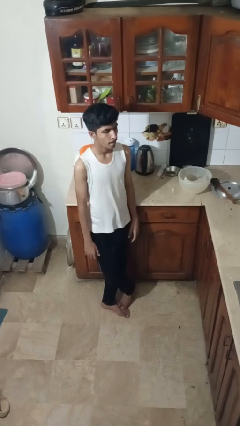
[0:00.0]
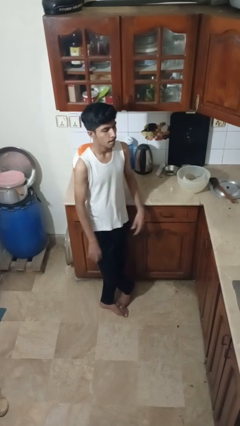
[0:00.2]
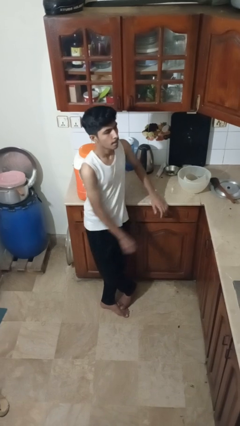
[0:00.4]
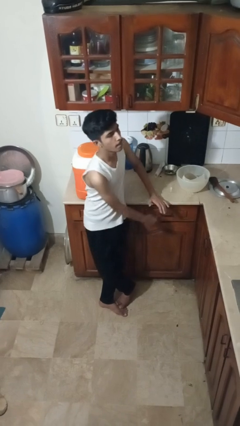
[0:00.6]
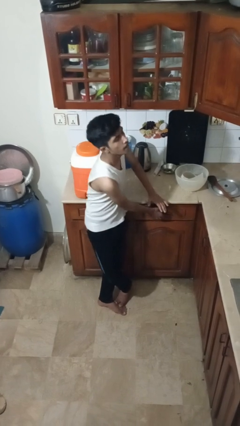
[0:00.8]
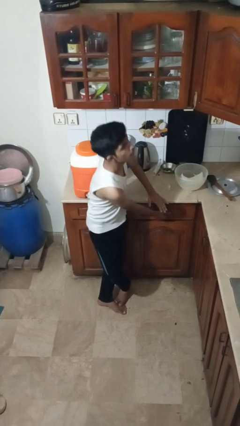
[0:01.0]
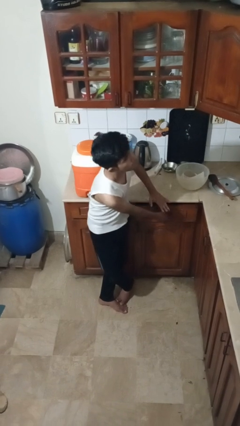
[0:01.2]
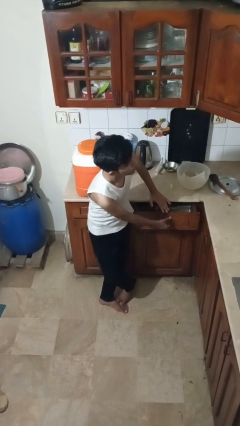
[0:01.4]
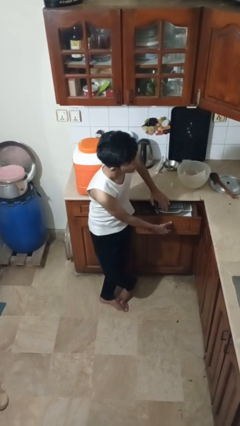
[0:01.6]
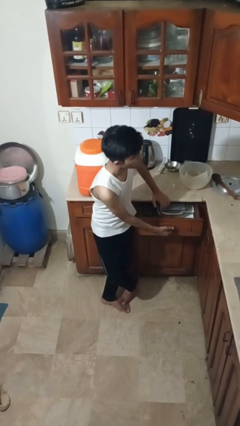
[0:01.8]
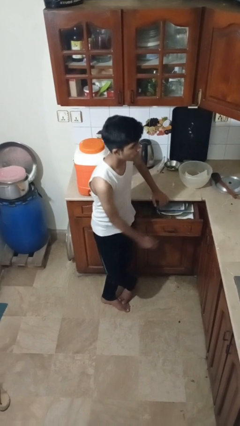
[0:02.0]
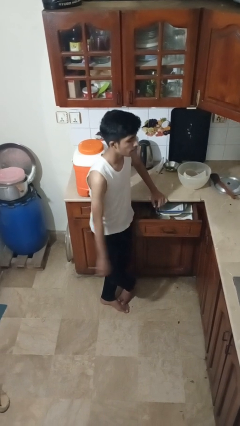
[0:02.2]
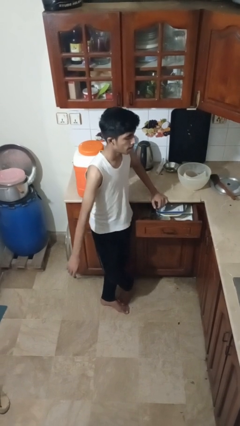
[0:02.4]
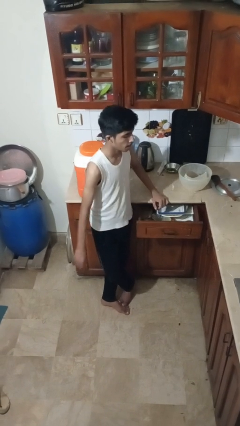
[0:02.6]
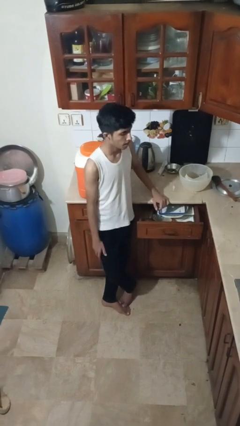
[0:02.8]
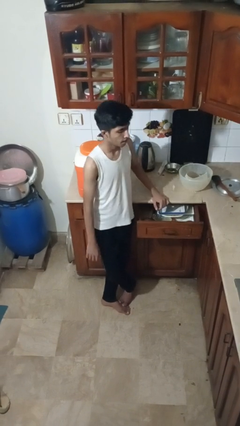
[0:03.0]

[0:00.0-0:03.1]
person opens kitchen drawer

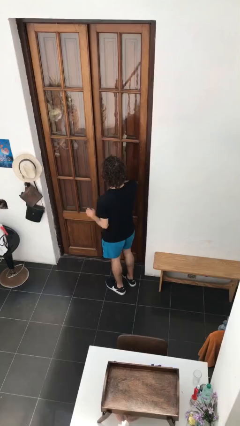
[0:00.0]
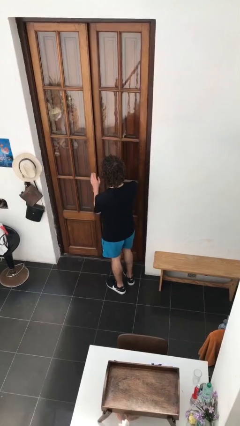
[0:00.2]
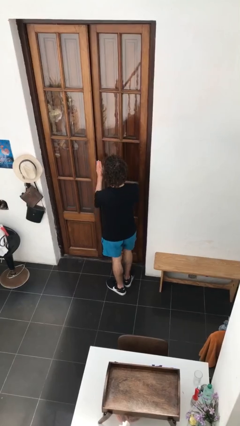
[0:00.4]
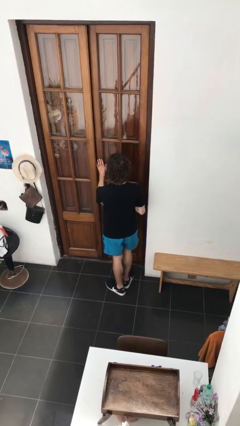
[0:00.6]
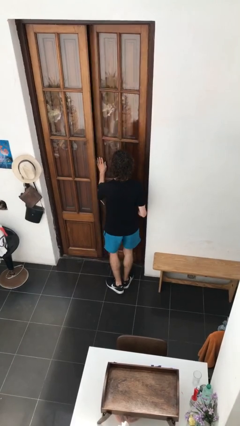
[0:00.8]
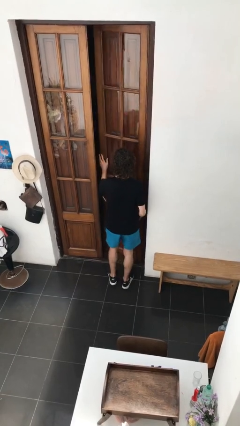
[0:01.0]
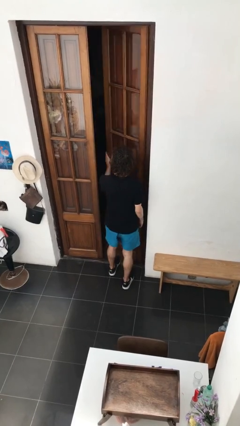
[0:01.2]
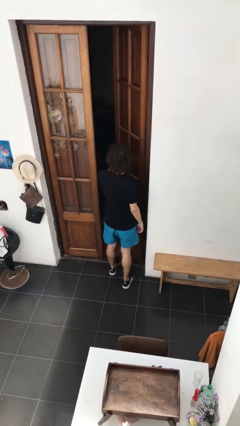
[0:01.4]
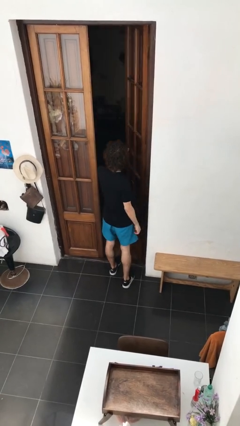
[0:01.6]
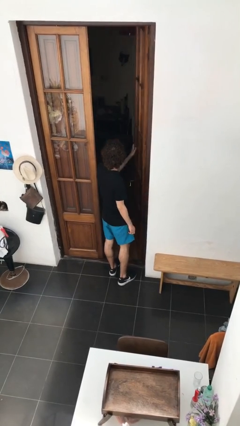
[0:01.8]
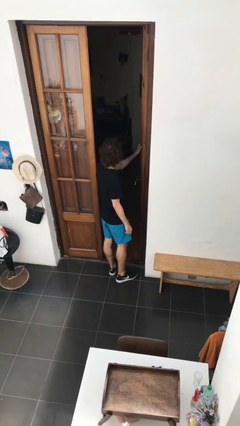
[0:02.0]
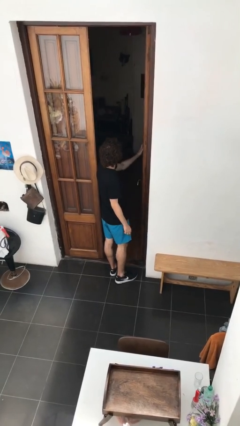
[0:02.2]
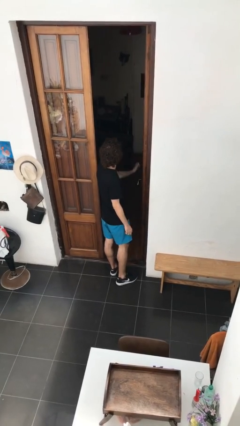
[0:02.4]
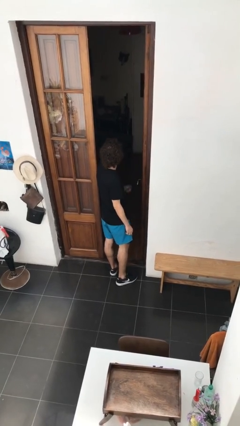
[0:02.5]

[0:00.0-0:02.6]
person opens facility door

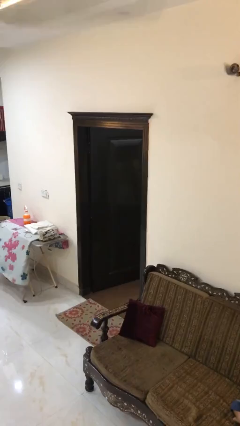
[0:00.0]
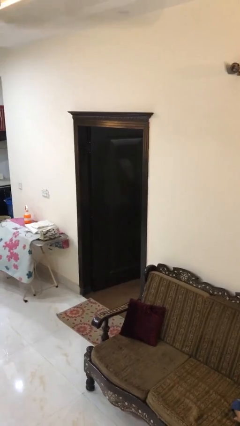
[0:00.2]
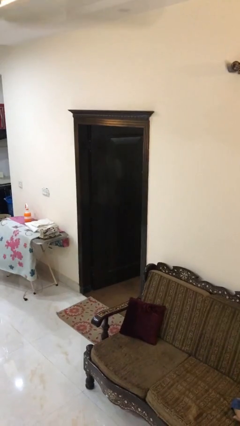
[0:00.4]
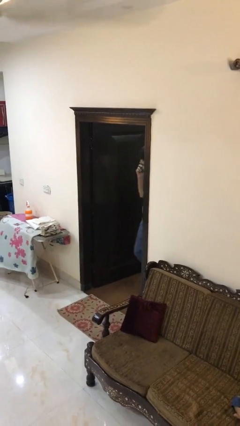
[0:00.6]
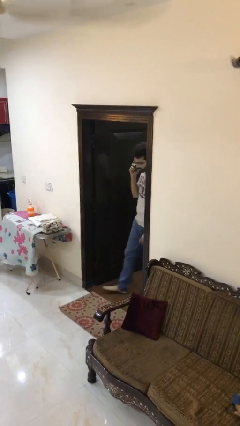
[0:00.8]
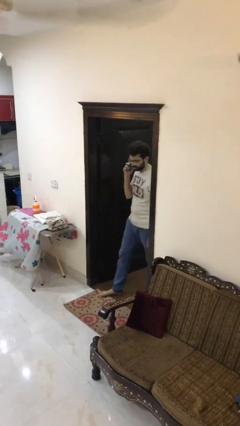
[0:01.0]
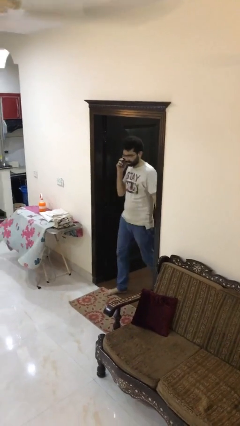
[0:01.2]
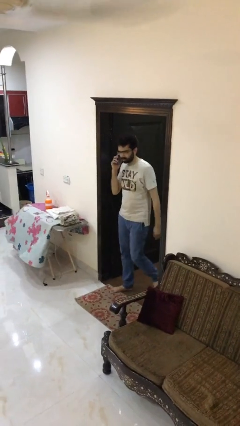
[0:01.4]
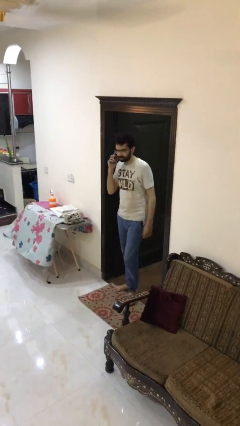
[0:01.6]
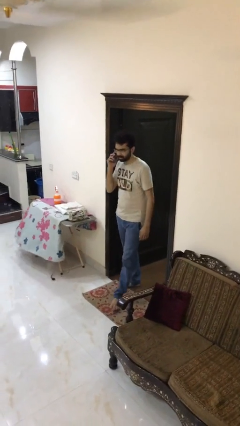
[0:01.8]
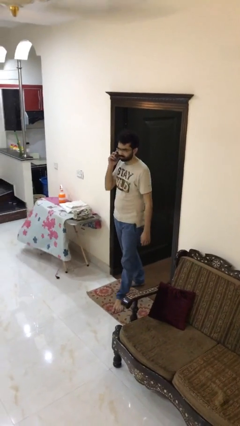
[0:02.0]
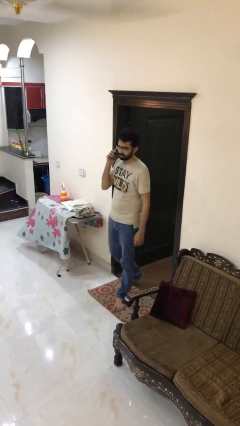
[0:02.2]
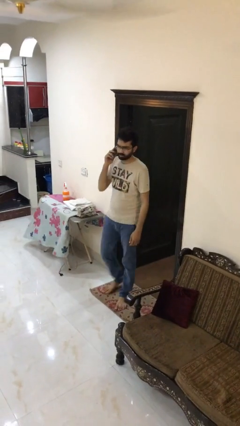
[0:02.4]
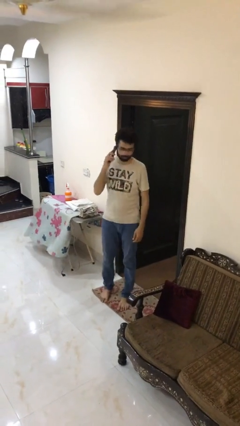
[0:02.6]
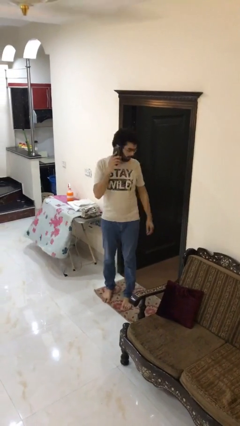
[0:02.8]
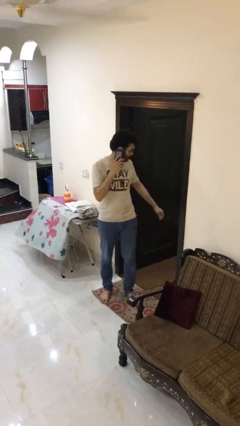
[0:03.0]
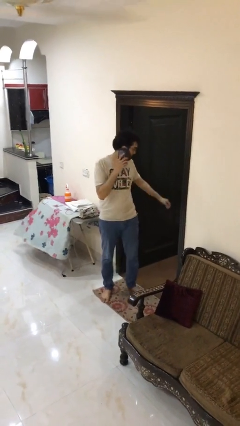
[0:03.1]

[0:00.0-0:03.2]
person enters scene through structure

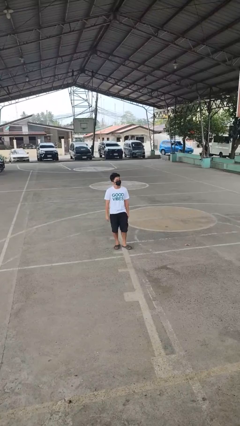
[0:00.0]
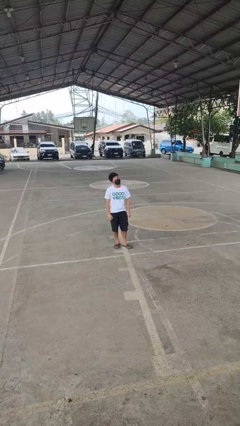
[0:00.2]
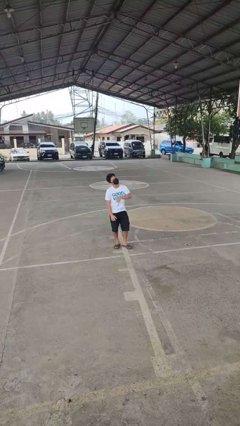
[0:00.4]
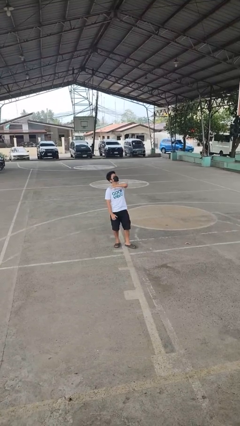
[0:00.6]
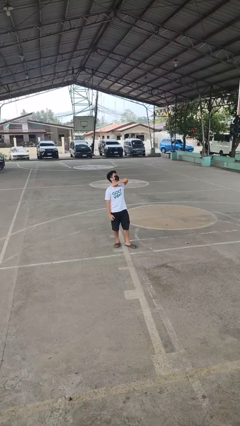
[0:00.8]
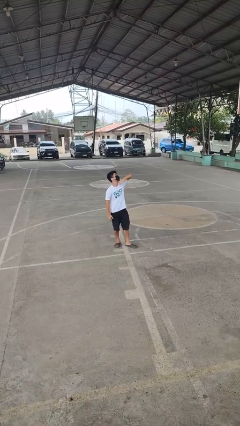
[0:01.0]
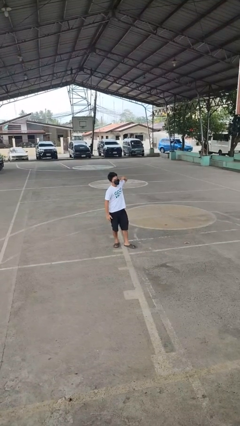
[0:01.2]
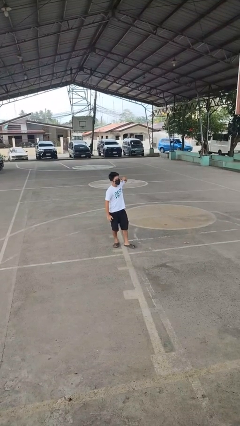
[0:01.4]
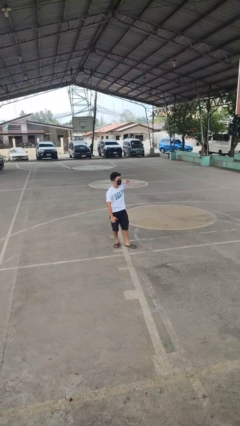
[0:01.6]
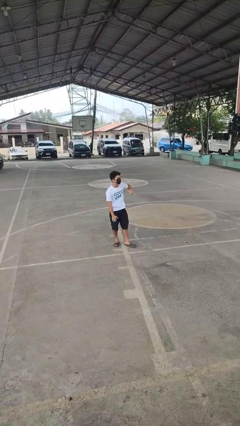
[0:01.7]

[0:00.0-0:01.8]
person gestures cut

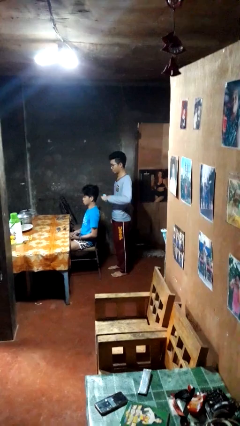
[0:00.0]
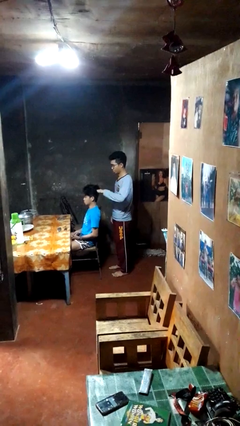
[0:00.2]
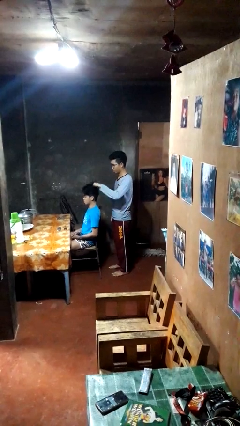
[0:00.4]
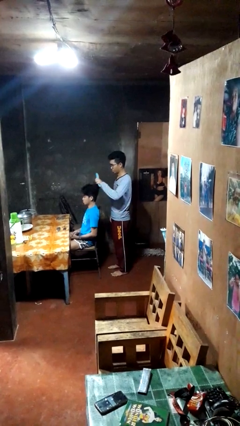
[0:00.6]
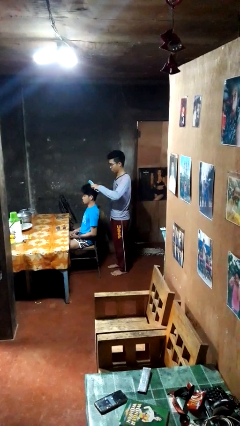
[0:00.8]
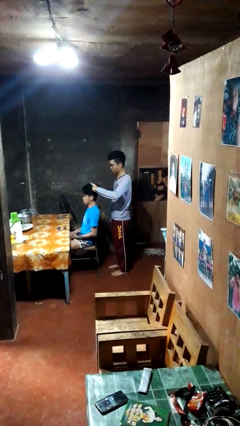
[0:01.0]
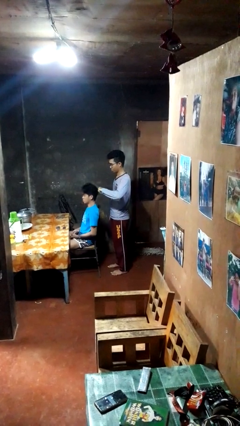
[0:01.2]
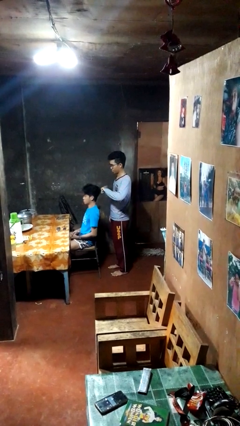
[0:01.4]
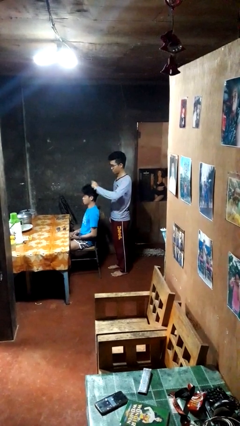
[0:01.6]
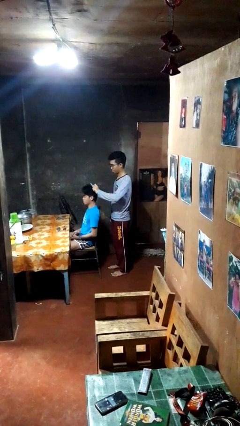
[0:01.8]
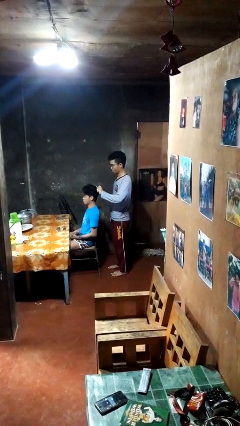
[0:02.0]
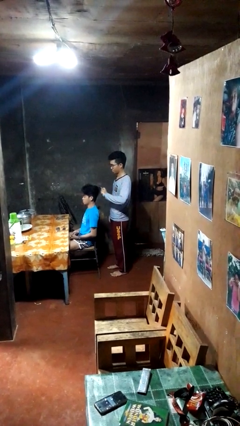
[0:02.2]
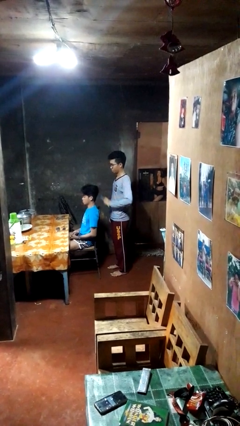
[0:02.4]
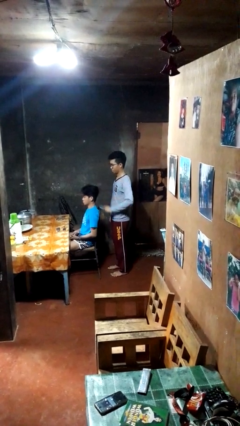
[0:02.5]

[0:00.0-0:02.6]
person brushes hair of person

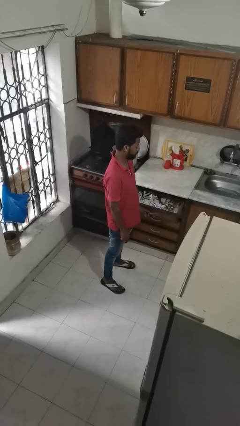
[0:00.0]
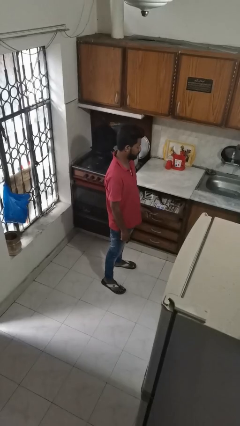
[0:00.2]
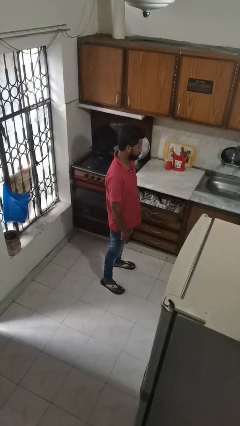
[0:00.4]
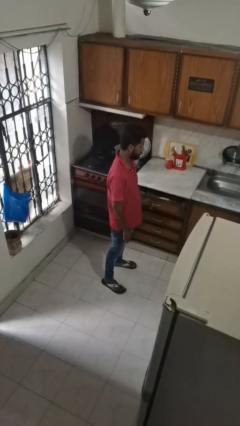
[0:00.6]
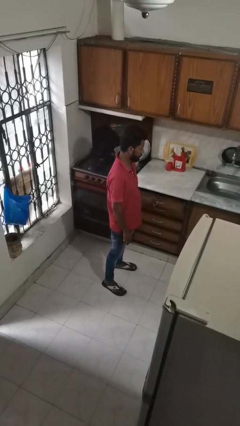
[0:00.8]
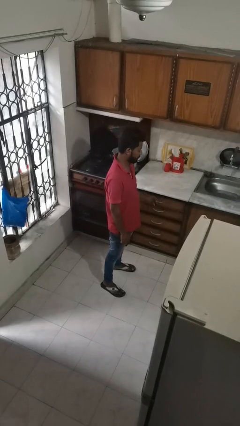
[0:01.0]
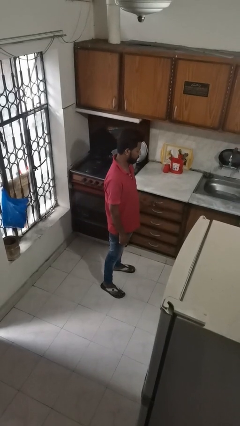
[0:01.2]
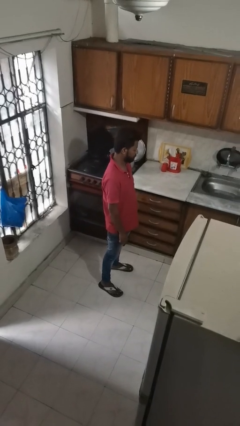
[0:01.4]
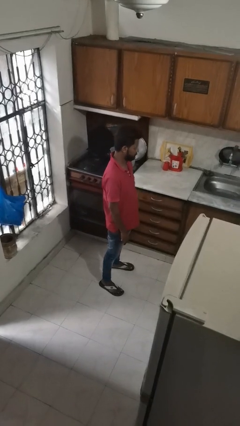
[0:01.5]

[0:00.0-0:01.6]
person closes kitchen drawer

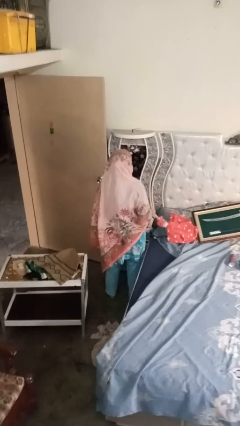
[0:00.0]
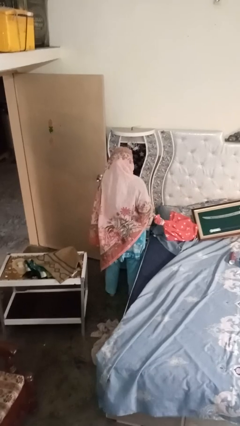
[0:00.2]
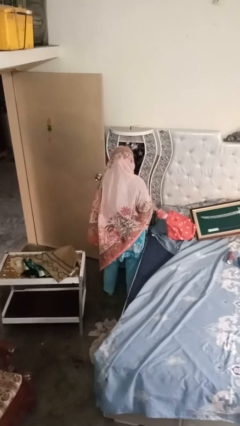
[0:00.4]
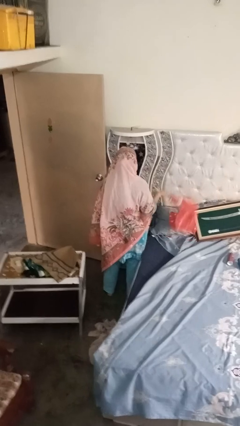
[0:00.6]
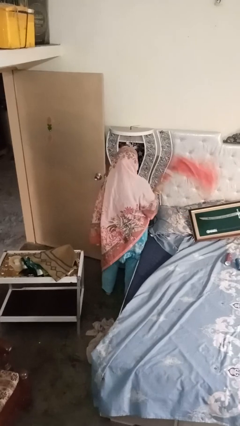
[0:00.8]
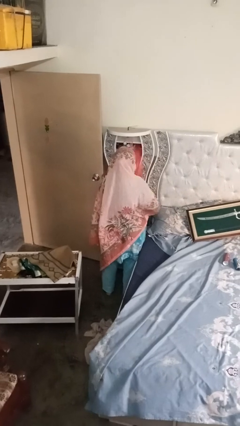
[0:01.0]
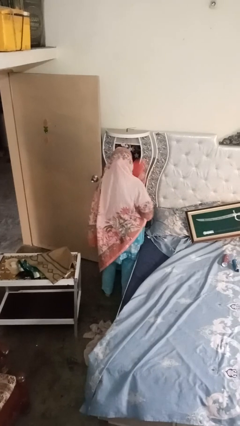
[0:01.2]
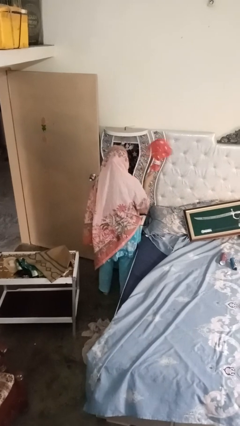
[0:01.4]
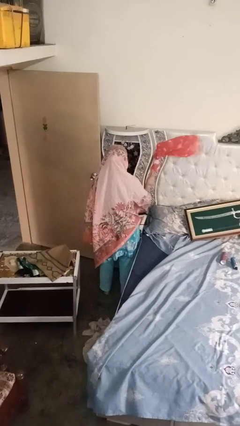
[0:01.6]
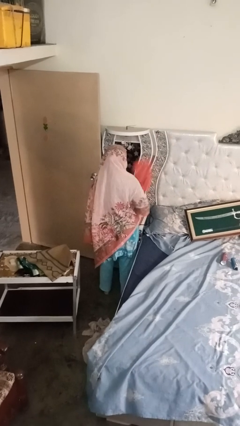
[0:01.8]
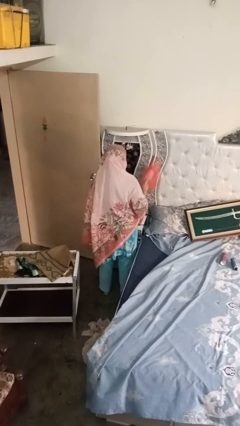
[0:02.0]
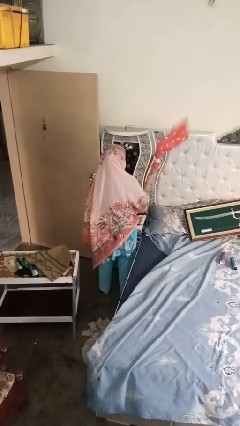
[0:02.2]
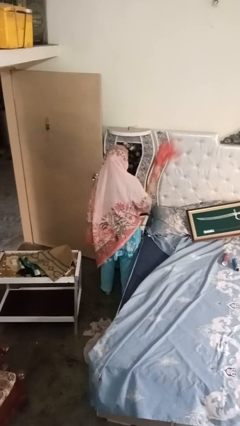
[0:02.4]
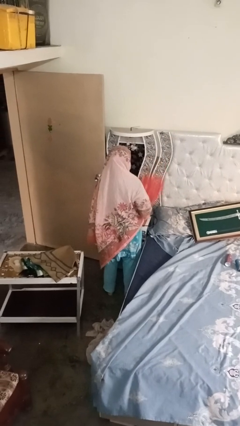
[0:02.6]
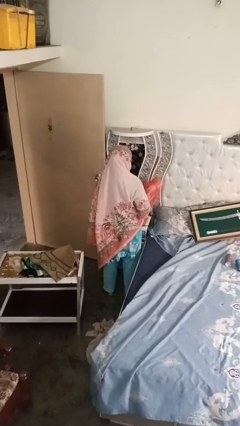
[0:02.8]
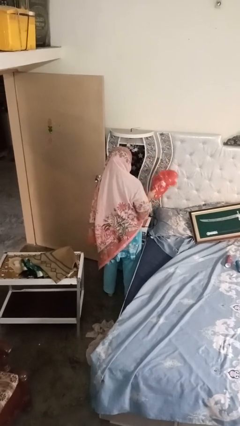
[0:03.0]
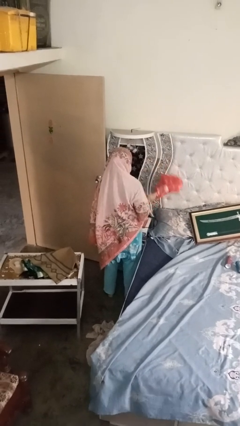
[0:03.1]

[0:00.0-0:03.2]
person dusts furniture
